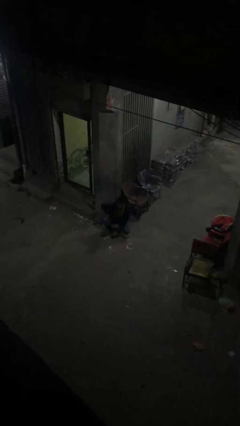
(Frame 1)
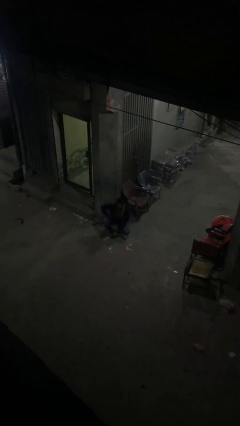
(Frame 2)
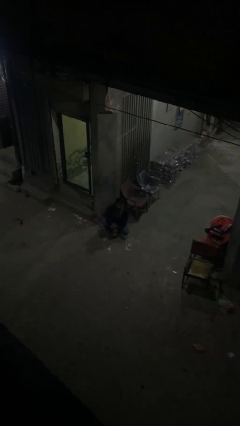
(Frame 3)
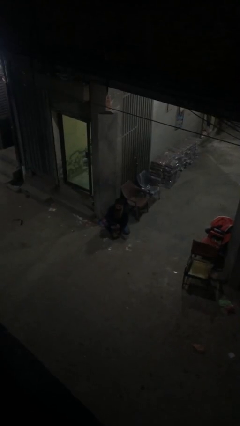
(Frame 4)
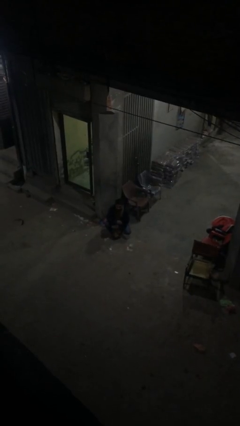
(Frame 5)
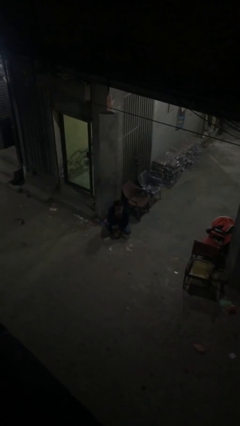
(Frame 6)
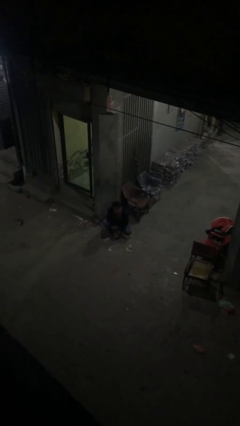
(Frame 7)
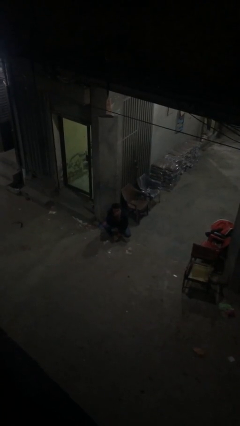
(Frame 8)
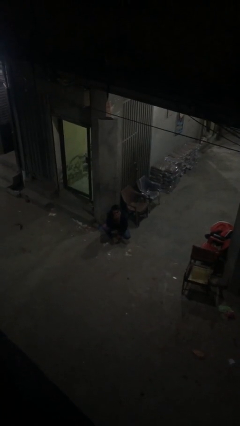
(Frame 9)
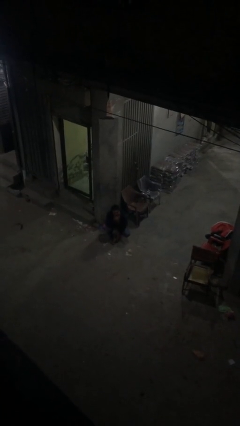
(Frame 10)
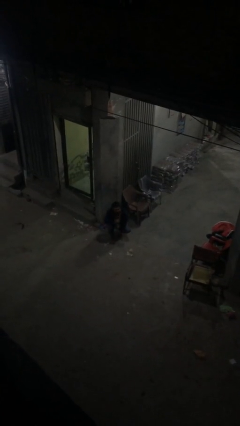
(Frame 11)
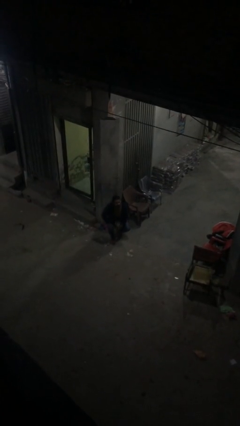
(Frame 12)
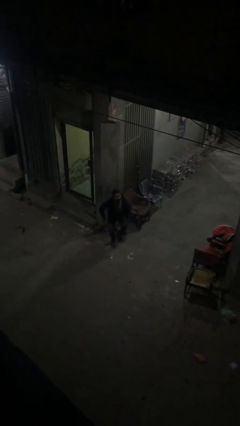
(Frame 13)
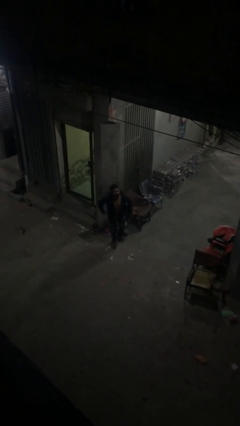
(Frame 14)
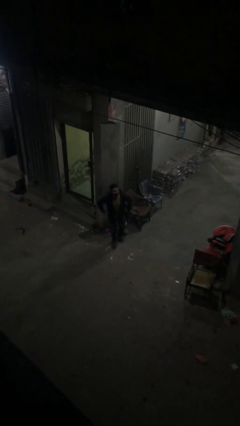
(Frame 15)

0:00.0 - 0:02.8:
person stands up

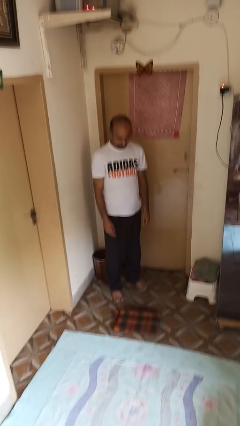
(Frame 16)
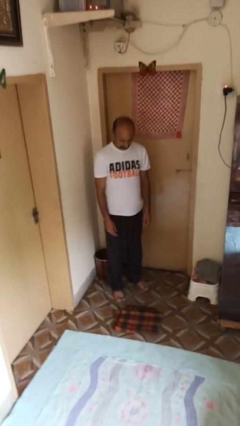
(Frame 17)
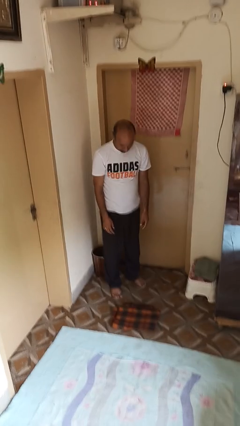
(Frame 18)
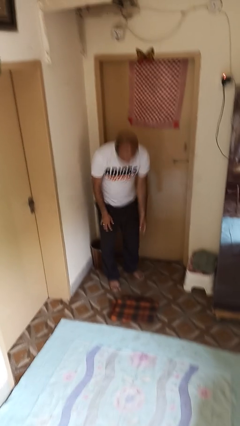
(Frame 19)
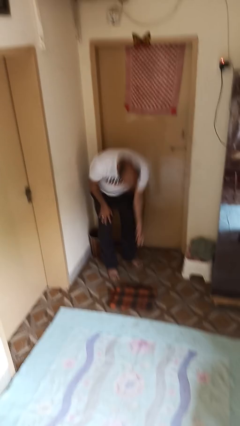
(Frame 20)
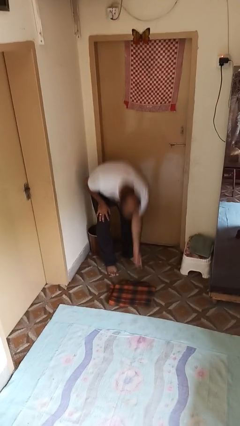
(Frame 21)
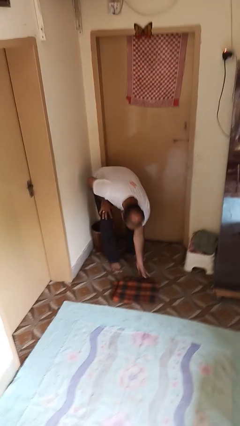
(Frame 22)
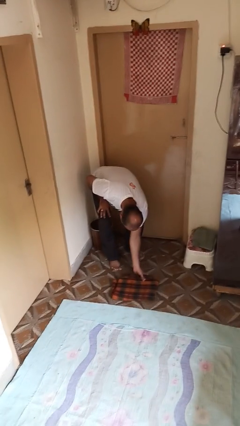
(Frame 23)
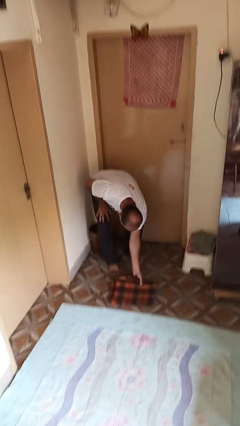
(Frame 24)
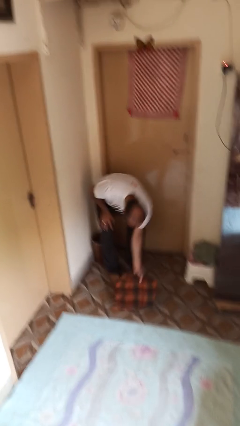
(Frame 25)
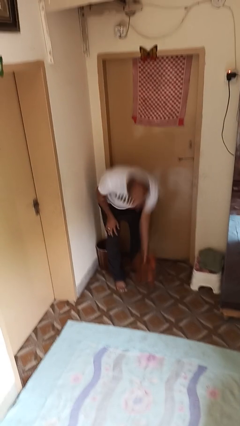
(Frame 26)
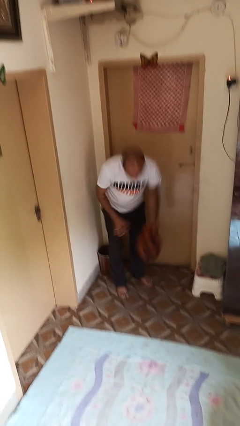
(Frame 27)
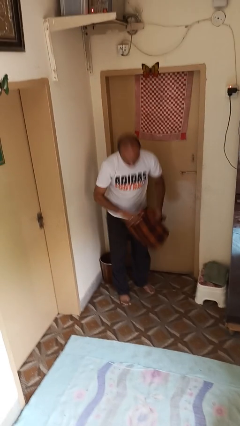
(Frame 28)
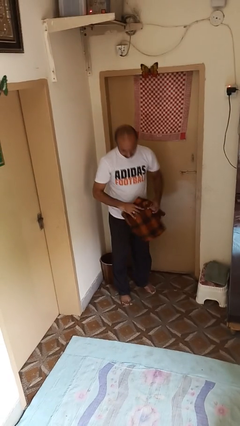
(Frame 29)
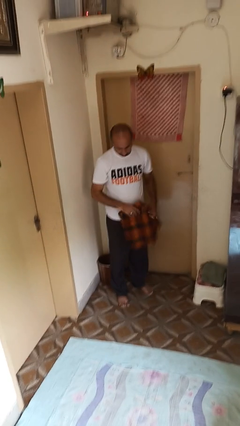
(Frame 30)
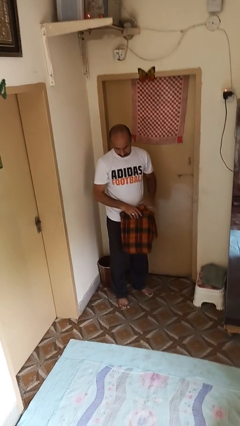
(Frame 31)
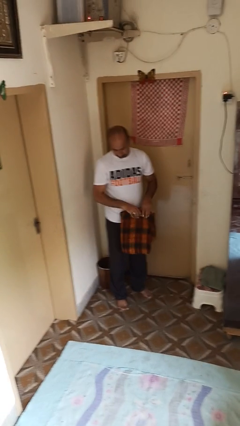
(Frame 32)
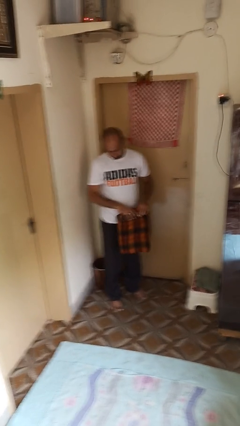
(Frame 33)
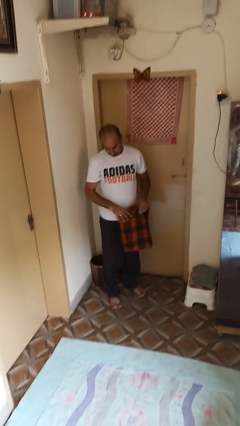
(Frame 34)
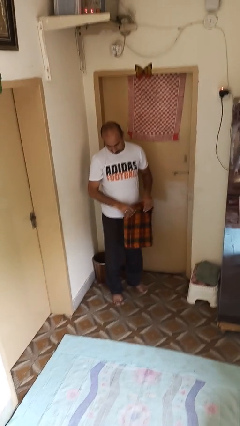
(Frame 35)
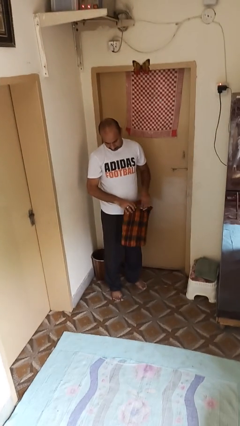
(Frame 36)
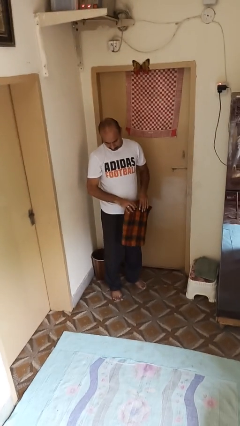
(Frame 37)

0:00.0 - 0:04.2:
person picks up object from couch

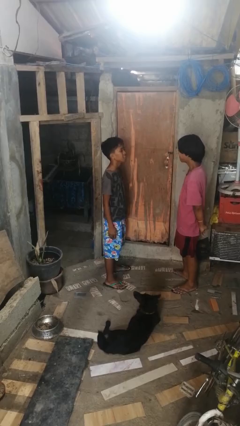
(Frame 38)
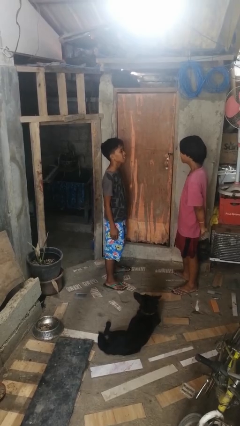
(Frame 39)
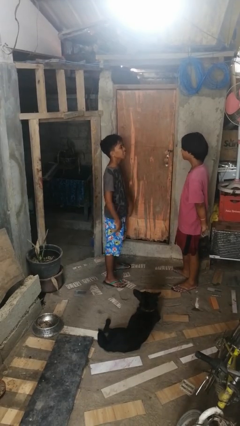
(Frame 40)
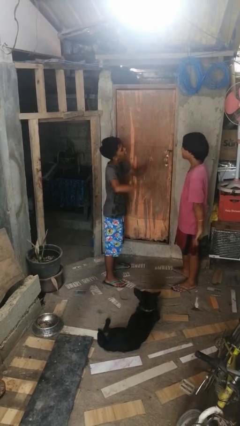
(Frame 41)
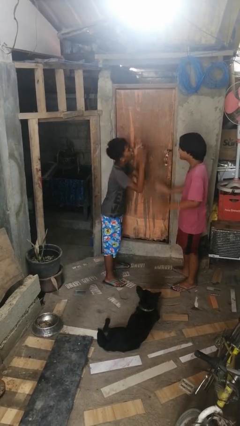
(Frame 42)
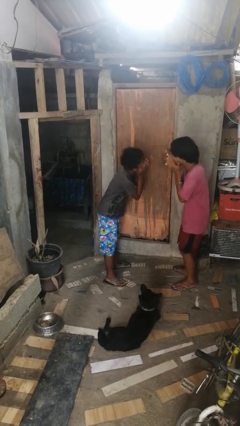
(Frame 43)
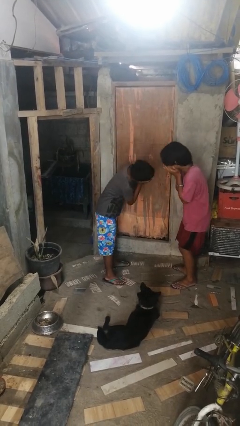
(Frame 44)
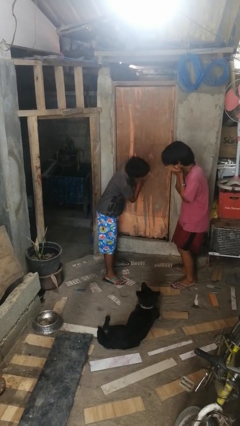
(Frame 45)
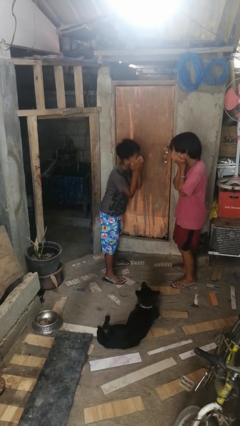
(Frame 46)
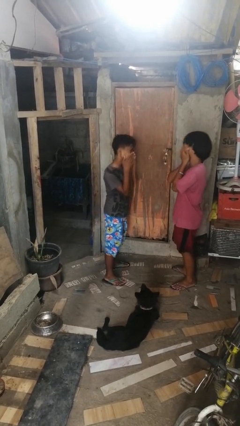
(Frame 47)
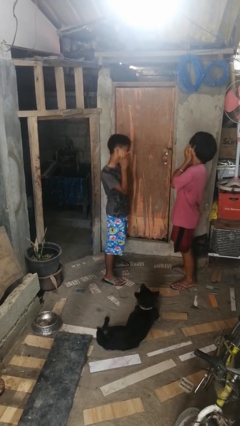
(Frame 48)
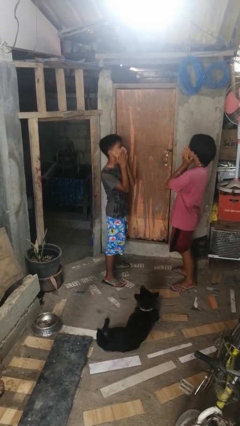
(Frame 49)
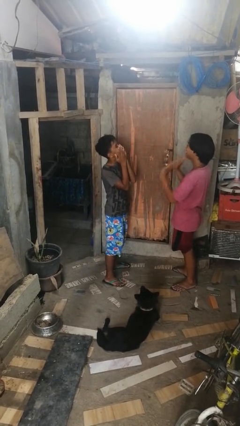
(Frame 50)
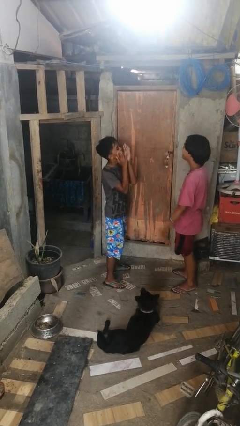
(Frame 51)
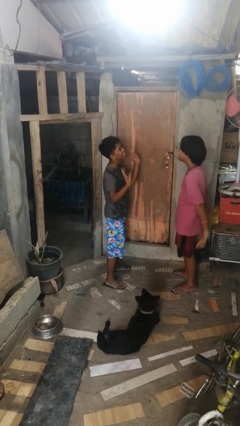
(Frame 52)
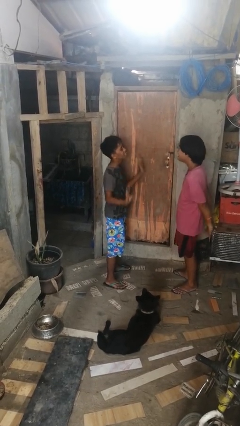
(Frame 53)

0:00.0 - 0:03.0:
person laughs with person

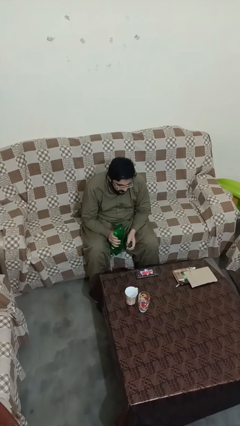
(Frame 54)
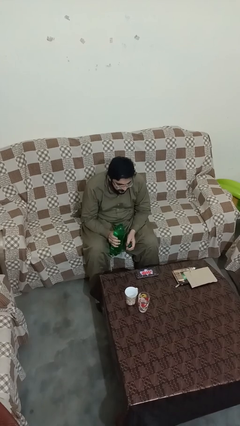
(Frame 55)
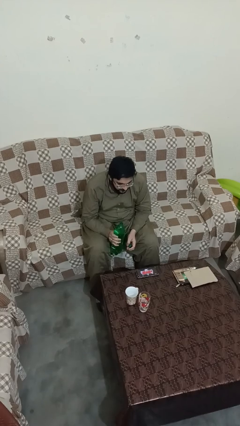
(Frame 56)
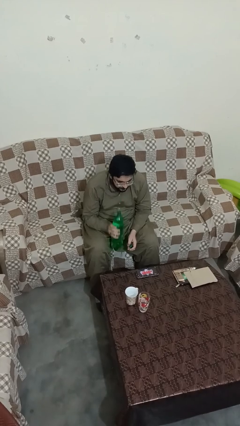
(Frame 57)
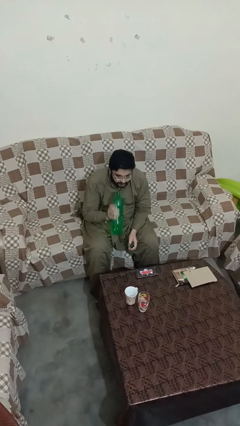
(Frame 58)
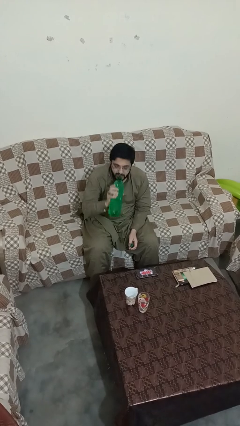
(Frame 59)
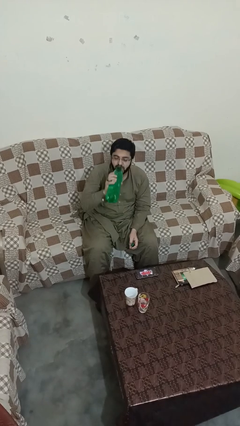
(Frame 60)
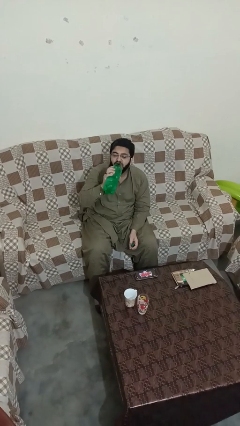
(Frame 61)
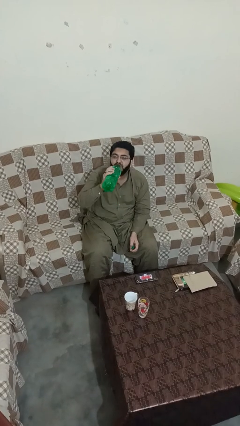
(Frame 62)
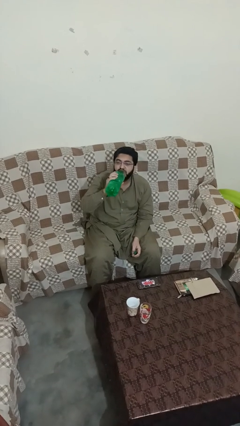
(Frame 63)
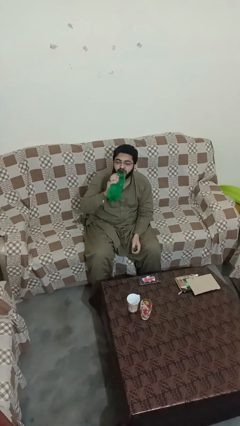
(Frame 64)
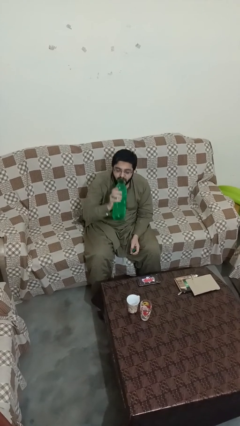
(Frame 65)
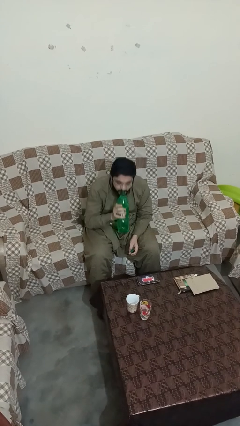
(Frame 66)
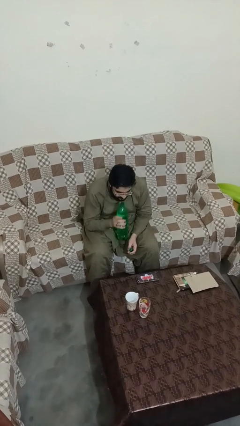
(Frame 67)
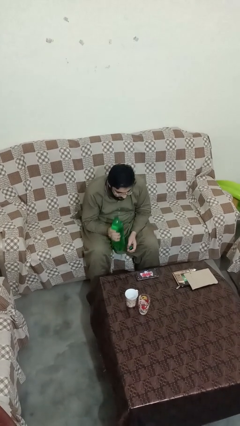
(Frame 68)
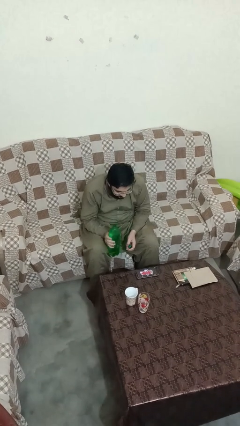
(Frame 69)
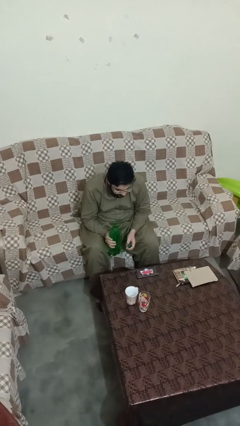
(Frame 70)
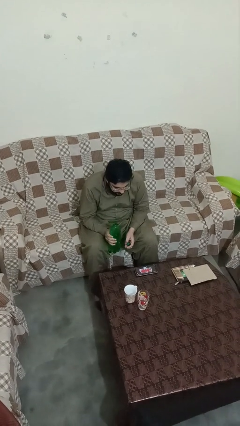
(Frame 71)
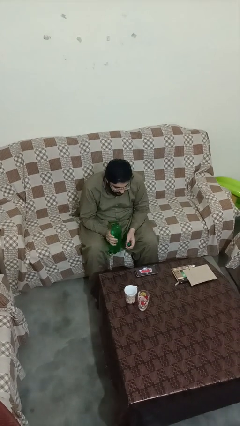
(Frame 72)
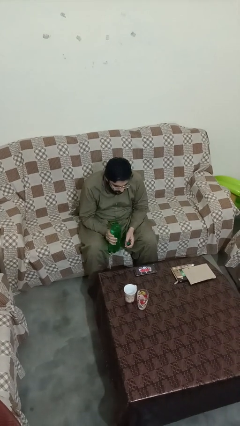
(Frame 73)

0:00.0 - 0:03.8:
person drinks from bottle

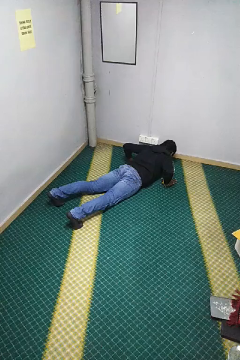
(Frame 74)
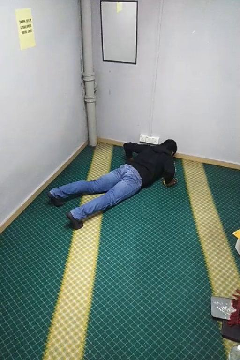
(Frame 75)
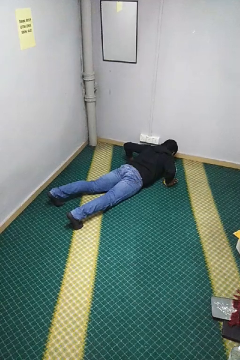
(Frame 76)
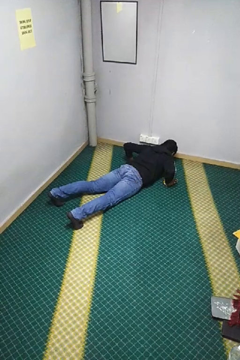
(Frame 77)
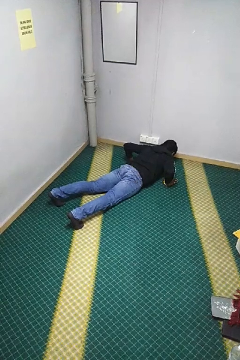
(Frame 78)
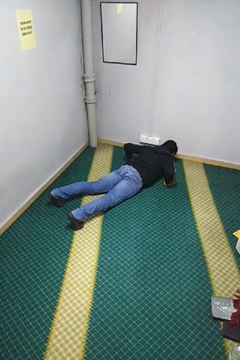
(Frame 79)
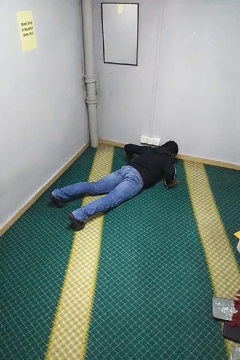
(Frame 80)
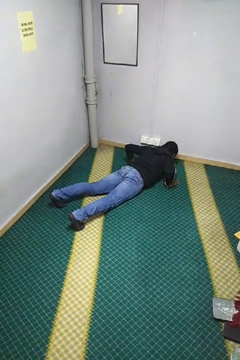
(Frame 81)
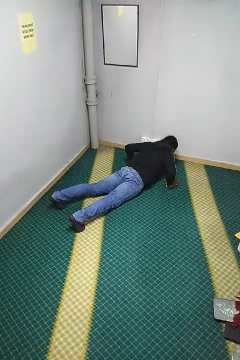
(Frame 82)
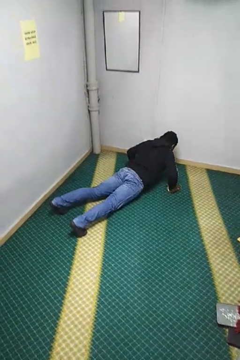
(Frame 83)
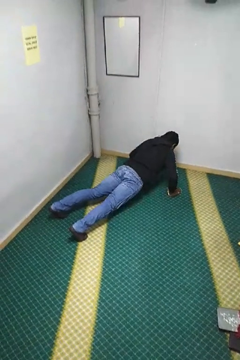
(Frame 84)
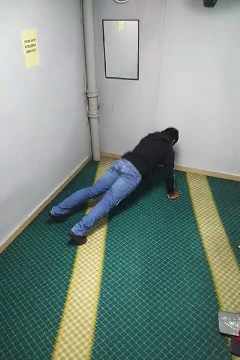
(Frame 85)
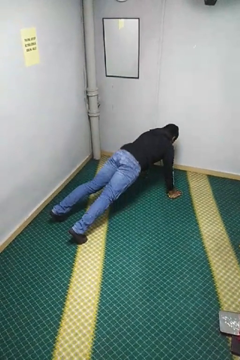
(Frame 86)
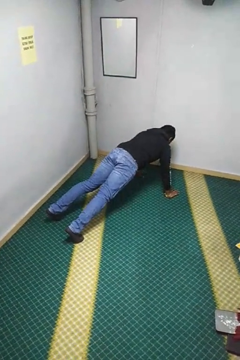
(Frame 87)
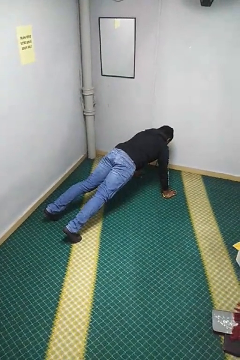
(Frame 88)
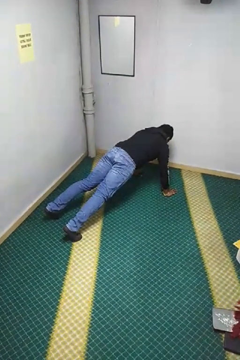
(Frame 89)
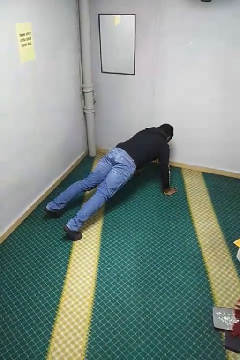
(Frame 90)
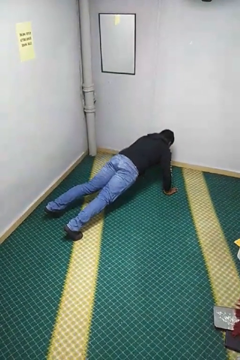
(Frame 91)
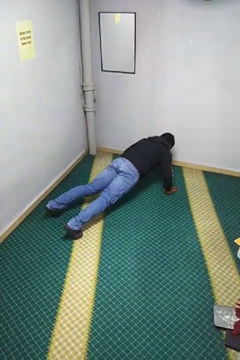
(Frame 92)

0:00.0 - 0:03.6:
person exercises with pushup

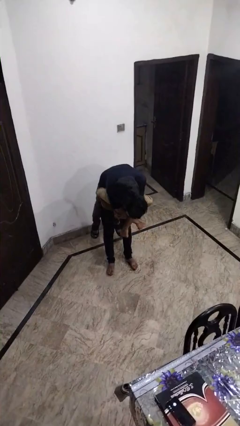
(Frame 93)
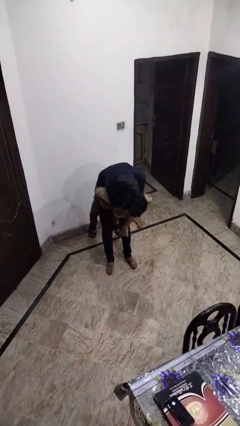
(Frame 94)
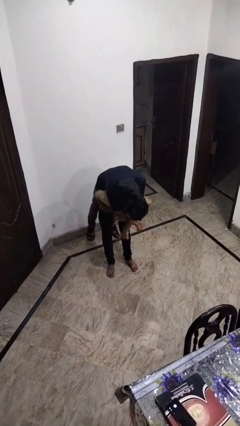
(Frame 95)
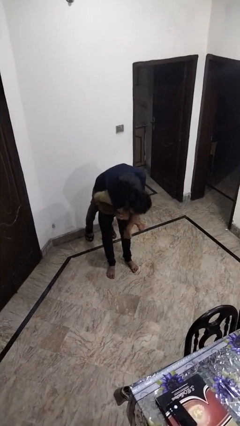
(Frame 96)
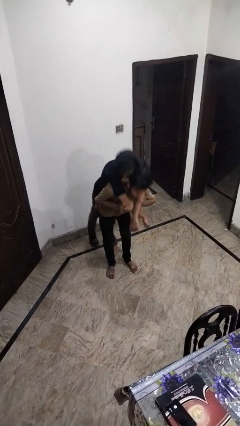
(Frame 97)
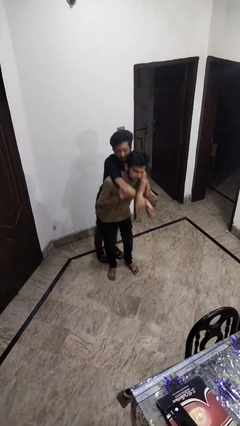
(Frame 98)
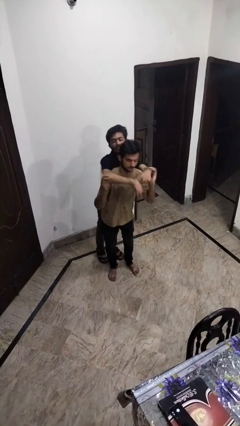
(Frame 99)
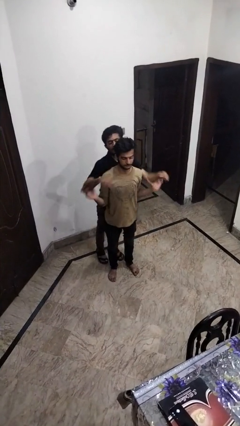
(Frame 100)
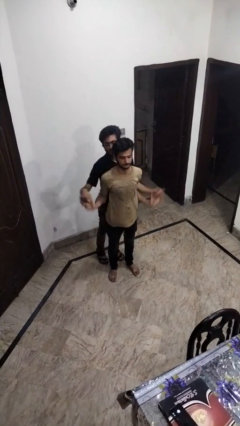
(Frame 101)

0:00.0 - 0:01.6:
person puts down person
